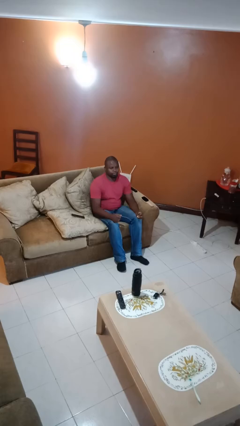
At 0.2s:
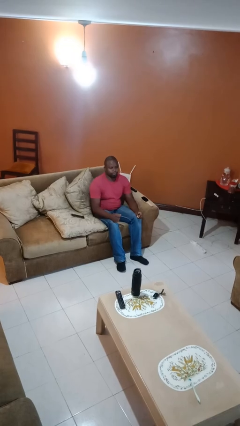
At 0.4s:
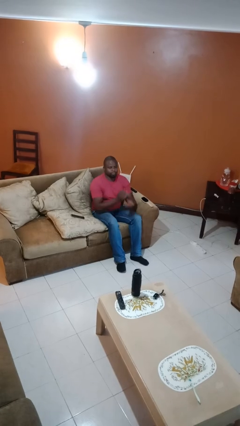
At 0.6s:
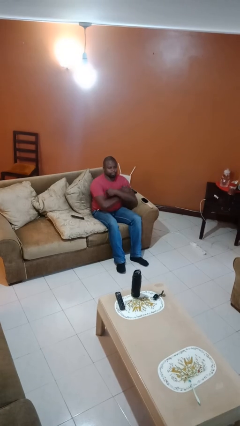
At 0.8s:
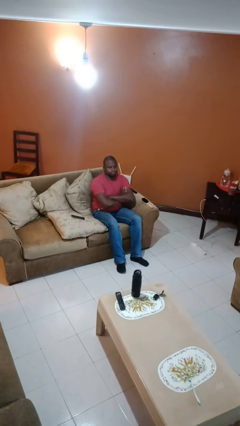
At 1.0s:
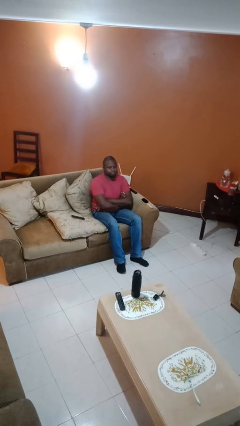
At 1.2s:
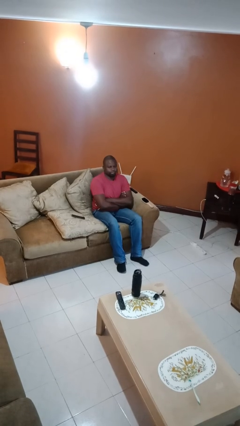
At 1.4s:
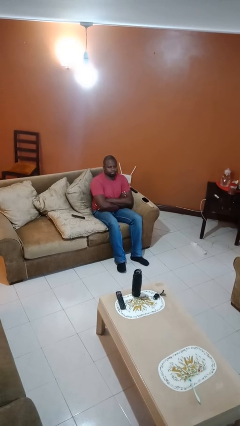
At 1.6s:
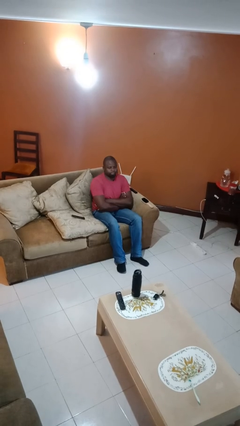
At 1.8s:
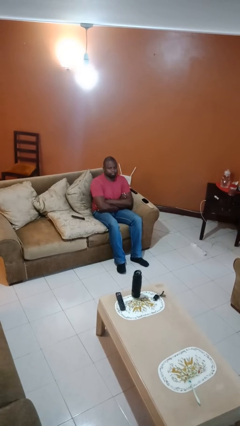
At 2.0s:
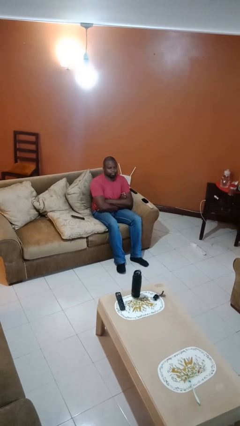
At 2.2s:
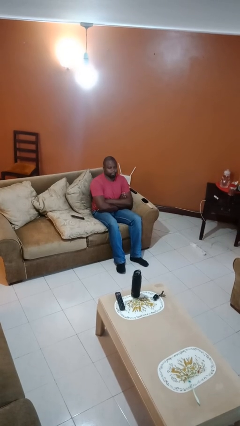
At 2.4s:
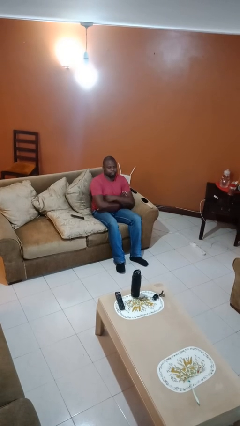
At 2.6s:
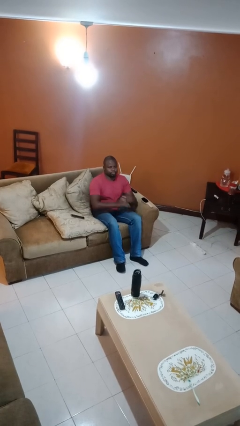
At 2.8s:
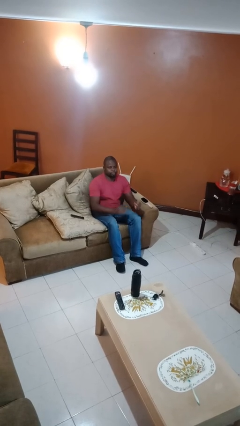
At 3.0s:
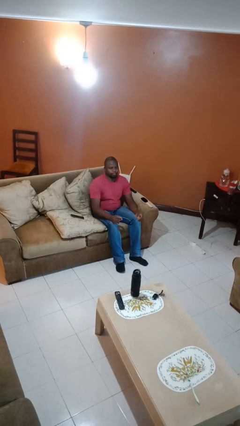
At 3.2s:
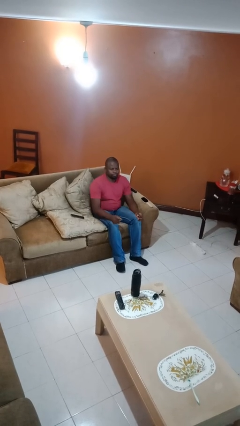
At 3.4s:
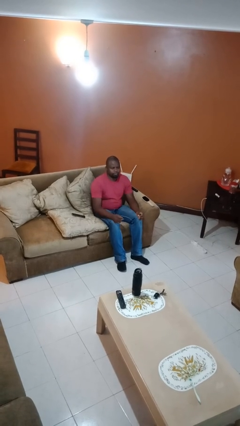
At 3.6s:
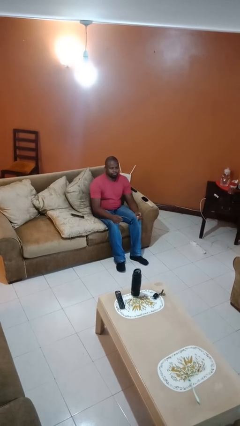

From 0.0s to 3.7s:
person crosses arms

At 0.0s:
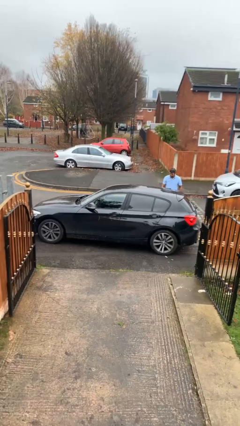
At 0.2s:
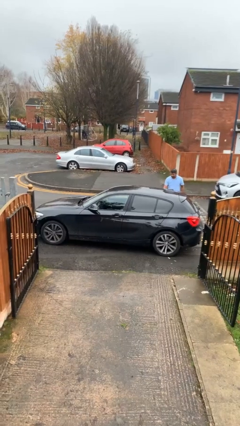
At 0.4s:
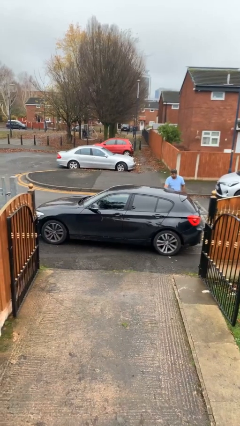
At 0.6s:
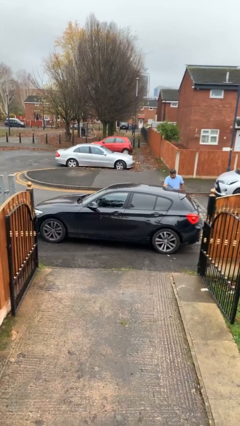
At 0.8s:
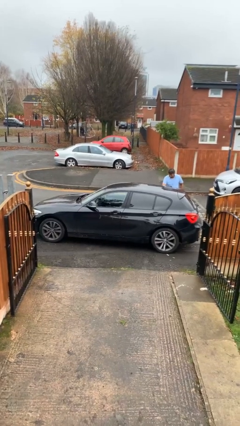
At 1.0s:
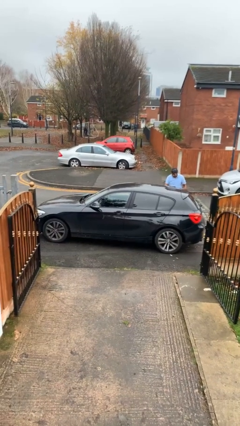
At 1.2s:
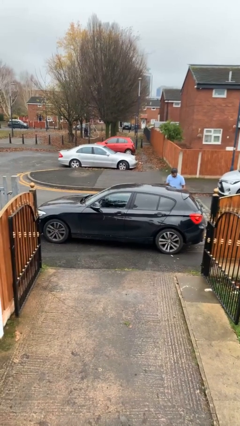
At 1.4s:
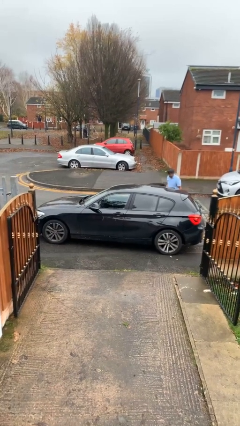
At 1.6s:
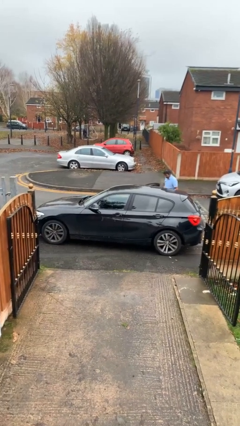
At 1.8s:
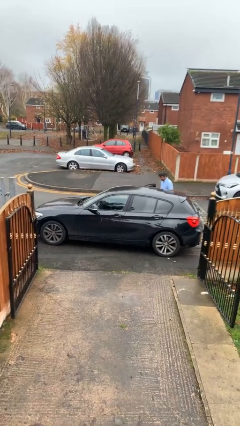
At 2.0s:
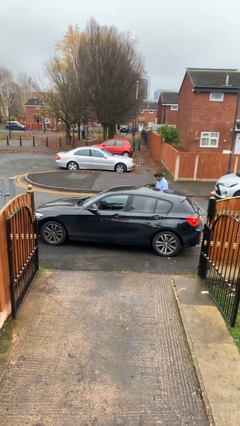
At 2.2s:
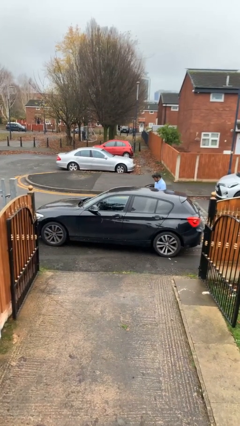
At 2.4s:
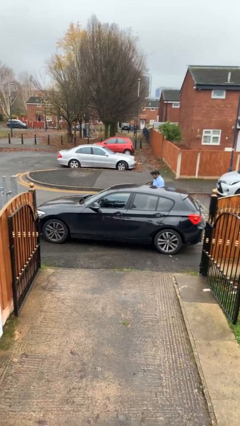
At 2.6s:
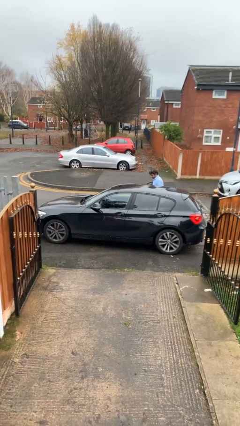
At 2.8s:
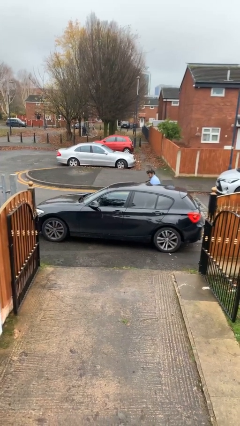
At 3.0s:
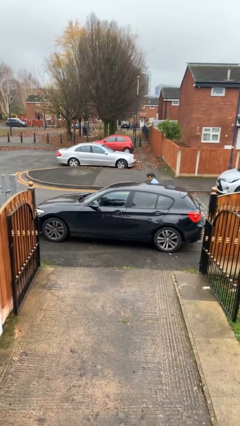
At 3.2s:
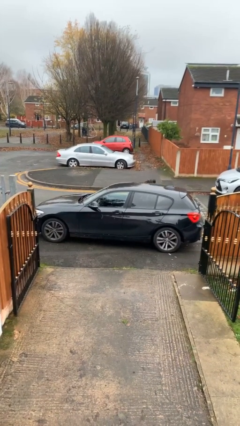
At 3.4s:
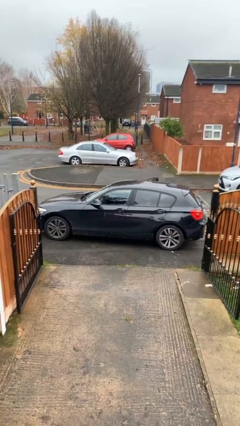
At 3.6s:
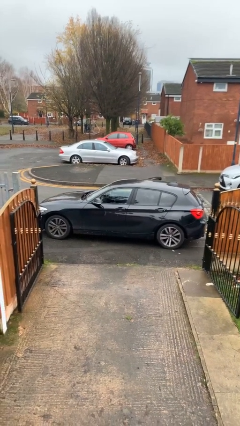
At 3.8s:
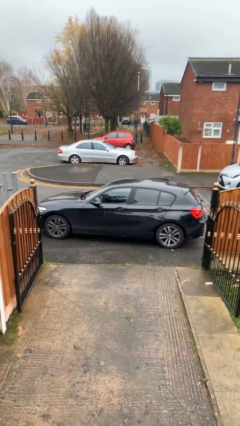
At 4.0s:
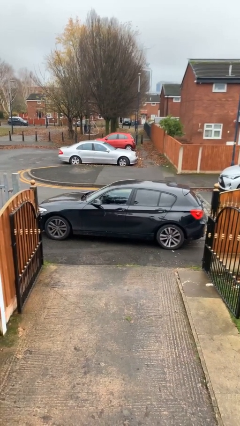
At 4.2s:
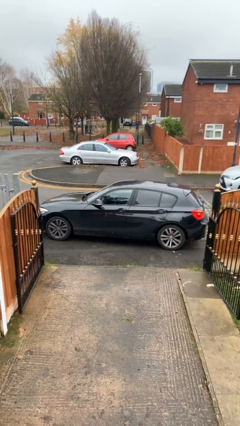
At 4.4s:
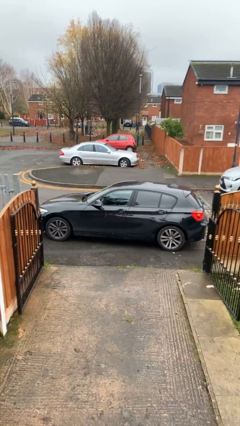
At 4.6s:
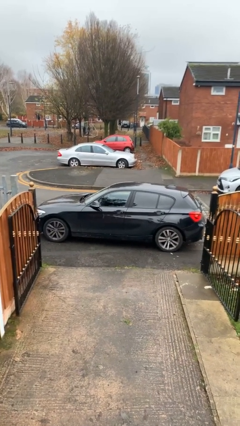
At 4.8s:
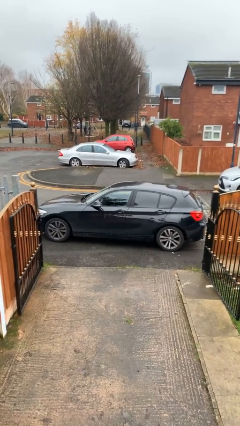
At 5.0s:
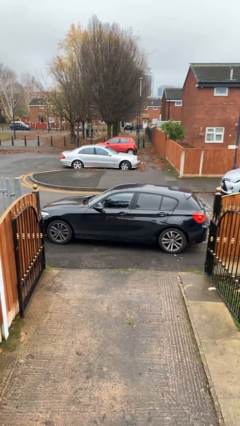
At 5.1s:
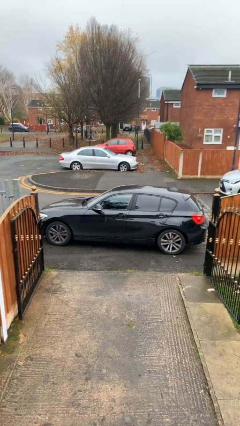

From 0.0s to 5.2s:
car picks up person

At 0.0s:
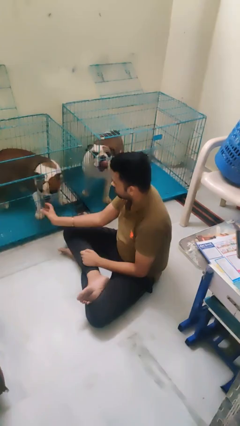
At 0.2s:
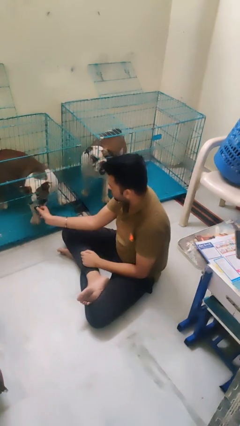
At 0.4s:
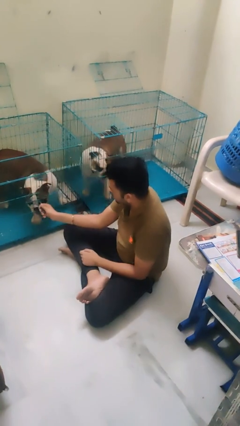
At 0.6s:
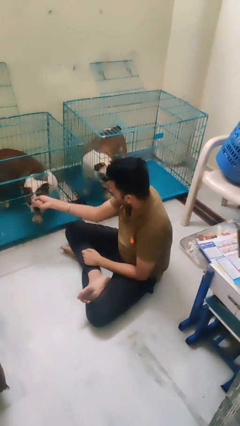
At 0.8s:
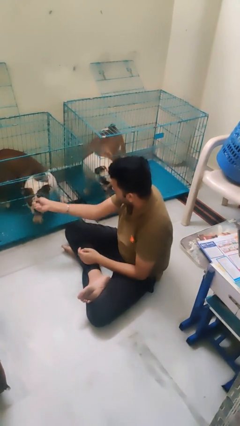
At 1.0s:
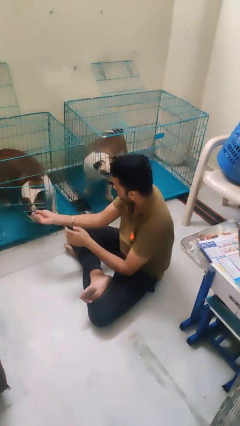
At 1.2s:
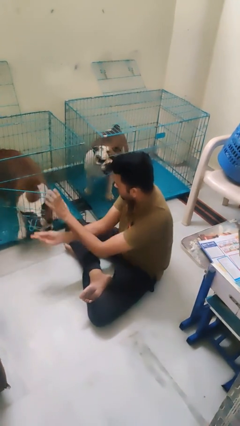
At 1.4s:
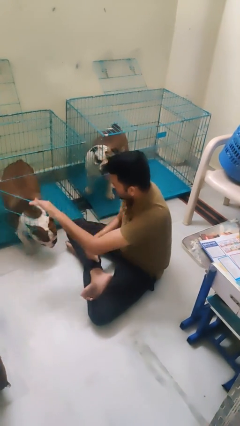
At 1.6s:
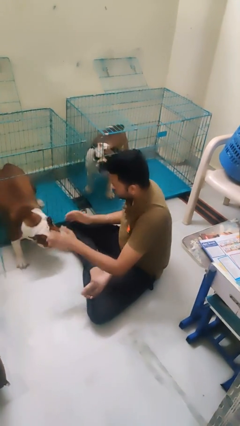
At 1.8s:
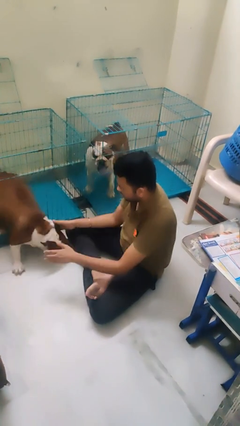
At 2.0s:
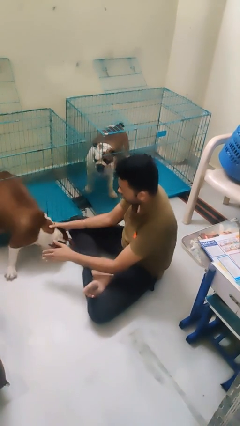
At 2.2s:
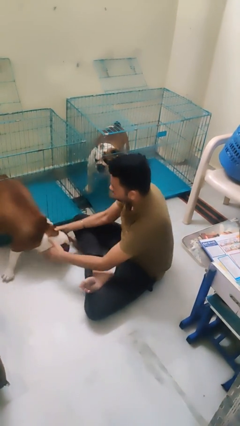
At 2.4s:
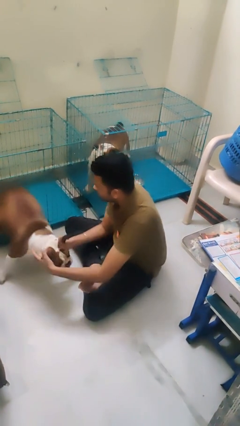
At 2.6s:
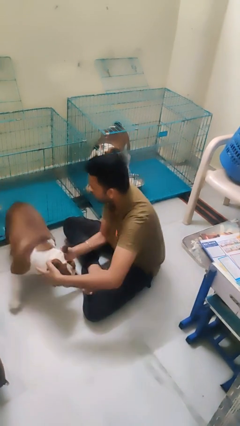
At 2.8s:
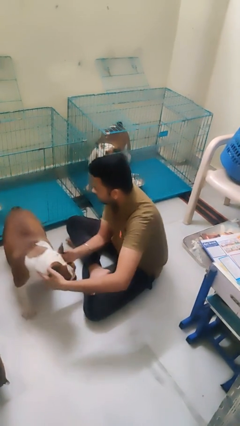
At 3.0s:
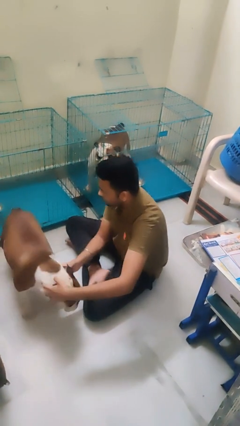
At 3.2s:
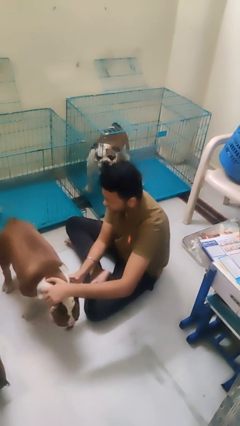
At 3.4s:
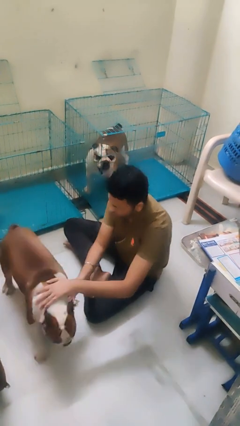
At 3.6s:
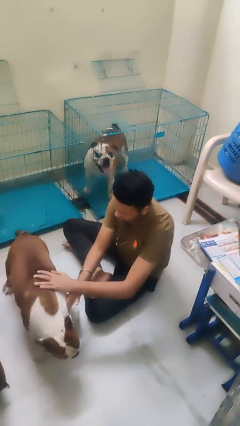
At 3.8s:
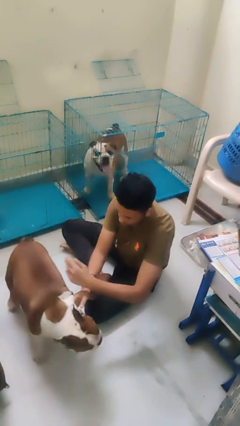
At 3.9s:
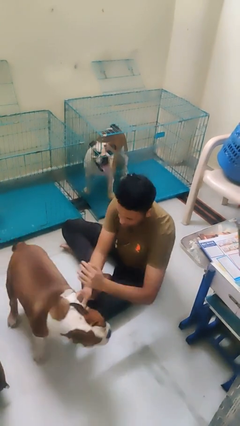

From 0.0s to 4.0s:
person uncrates dog

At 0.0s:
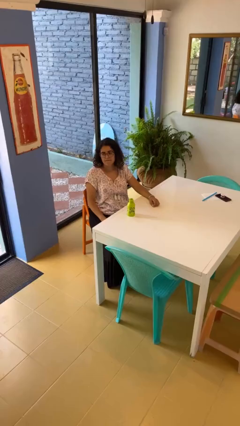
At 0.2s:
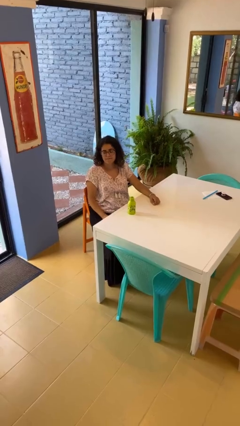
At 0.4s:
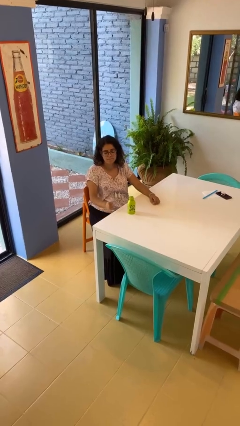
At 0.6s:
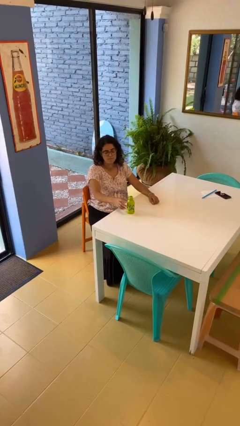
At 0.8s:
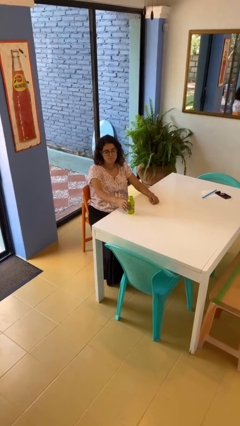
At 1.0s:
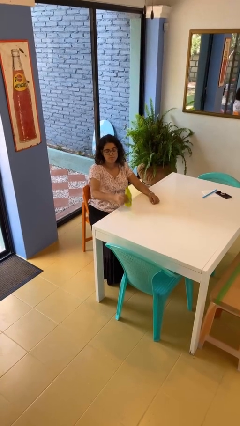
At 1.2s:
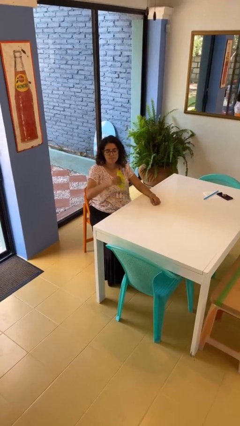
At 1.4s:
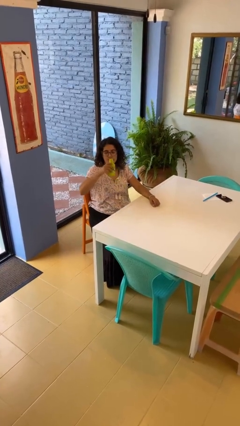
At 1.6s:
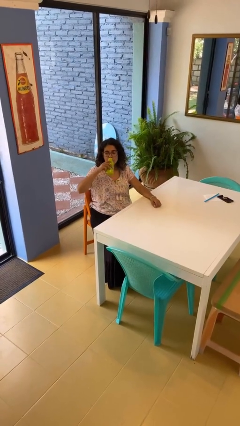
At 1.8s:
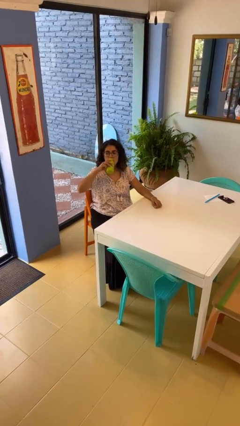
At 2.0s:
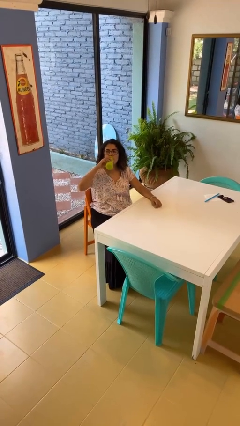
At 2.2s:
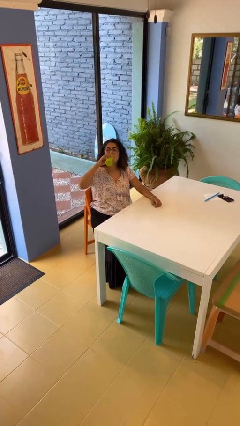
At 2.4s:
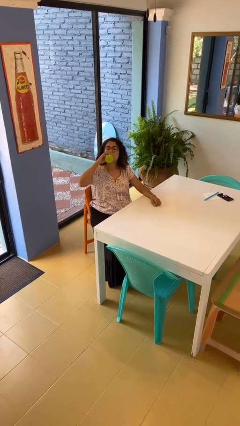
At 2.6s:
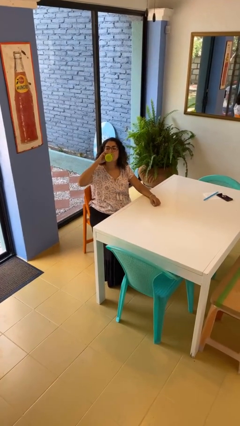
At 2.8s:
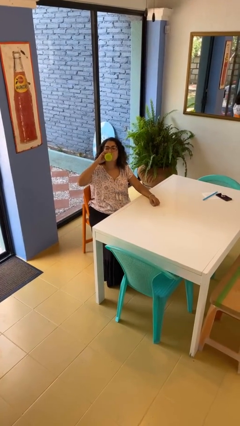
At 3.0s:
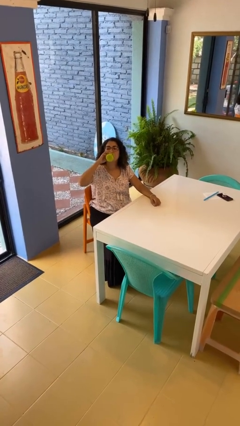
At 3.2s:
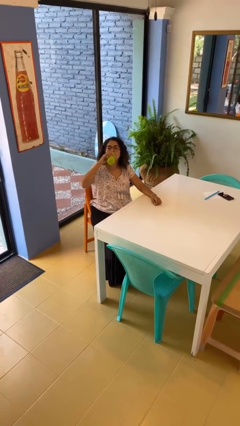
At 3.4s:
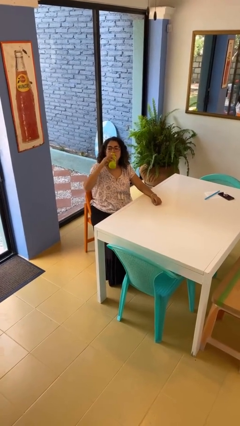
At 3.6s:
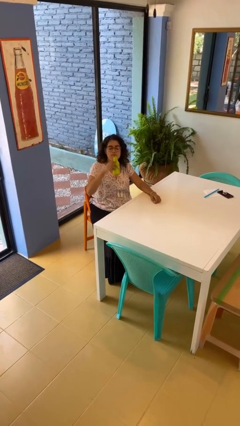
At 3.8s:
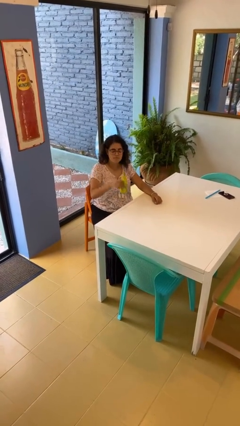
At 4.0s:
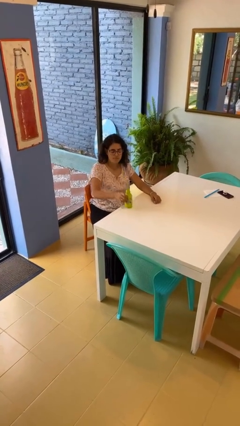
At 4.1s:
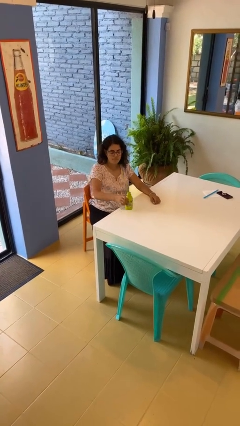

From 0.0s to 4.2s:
person drinks from bottle

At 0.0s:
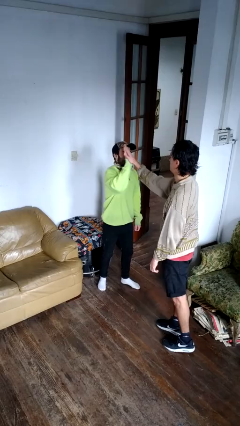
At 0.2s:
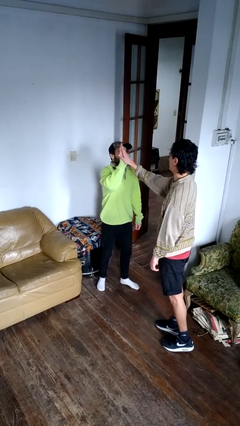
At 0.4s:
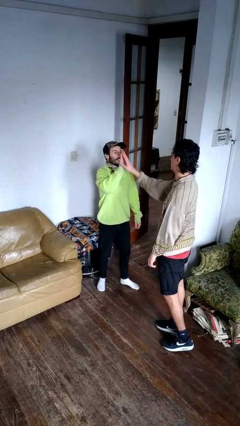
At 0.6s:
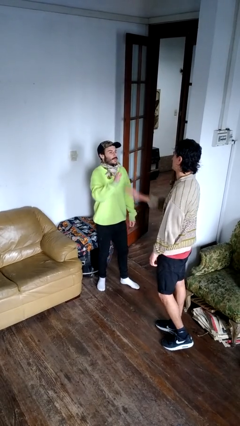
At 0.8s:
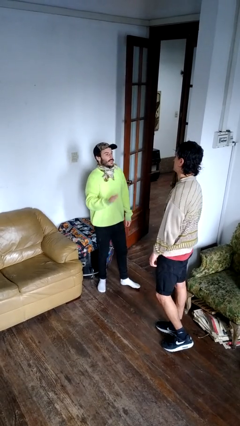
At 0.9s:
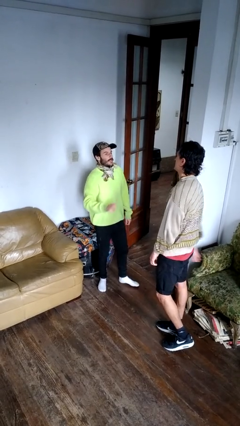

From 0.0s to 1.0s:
person highfives hand
